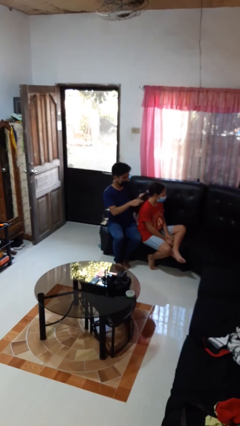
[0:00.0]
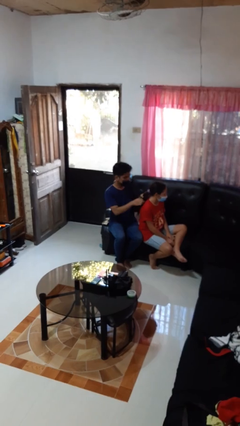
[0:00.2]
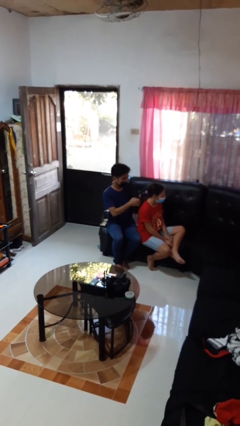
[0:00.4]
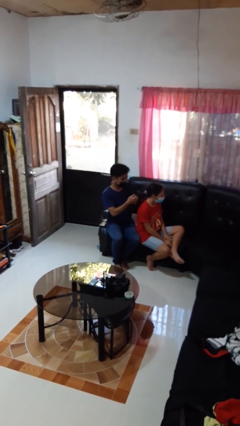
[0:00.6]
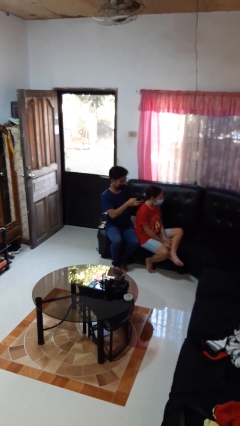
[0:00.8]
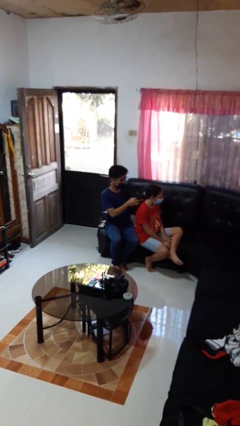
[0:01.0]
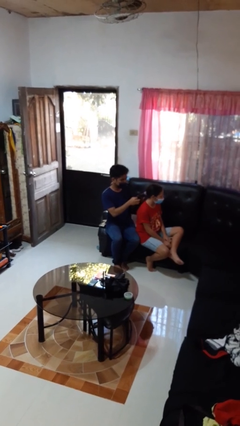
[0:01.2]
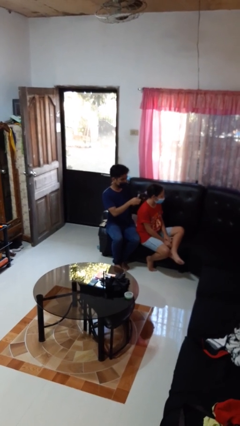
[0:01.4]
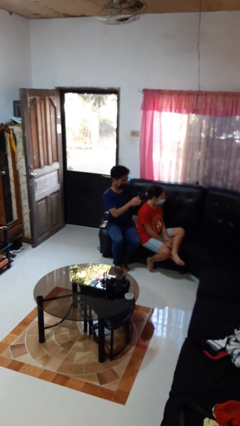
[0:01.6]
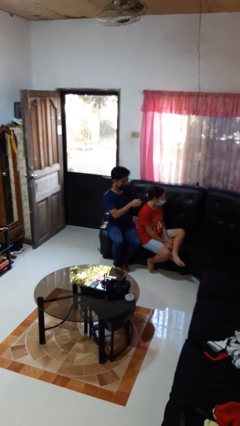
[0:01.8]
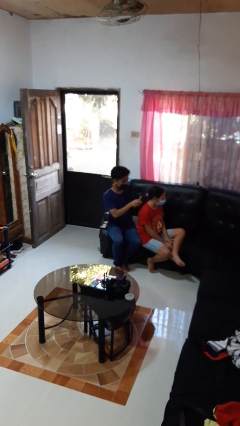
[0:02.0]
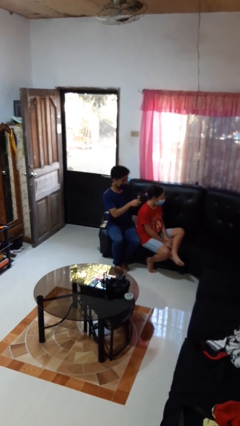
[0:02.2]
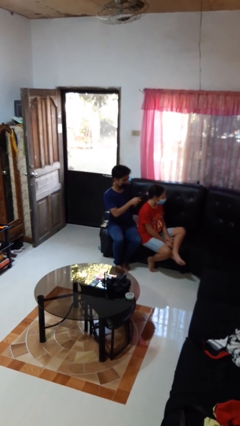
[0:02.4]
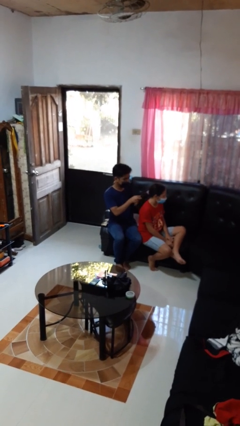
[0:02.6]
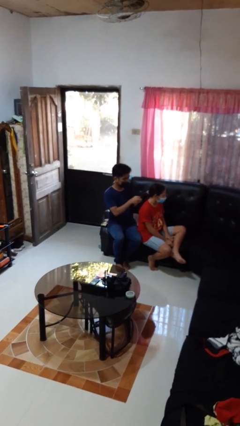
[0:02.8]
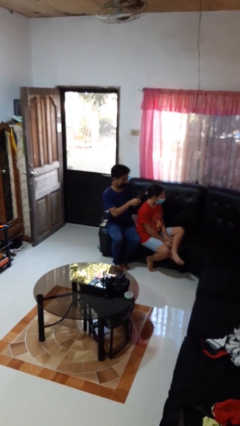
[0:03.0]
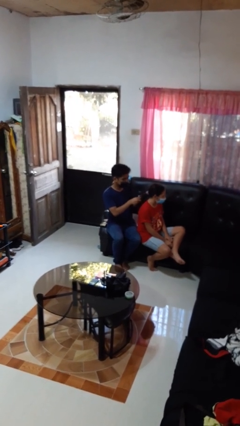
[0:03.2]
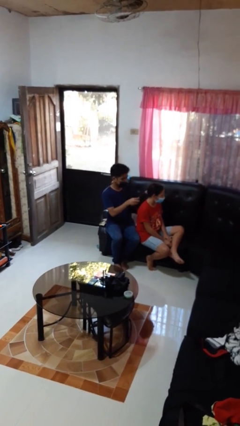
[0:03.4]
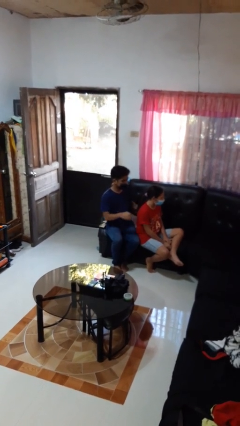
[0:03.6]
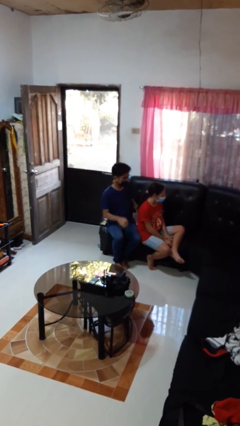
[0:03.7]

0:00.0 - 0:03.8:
person braids hair of person

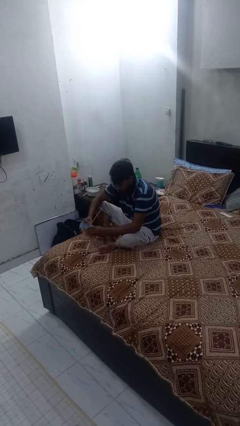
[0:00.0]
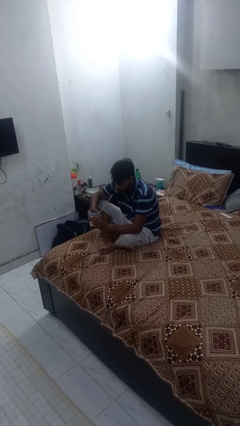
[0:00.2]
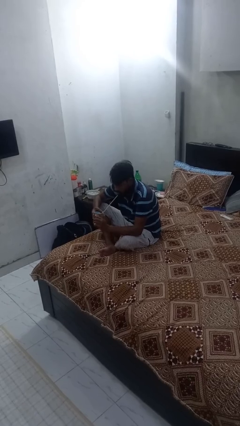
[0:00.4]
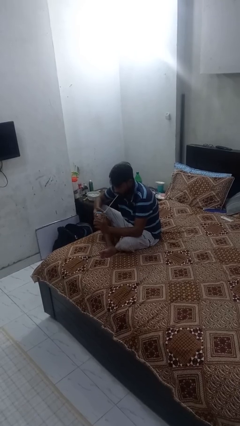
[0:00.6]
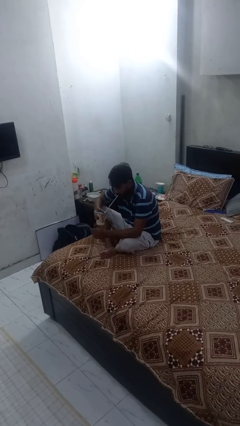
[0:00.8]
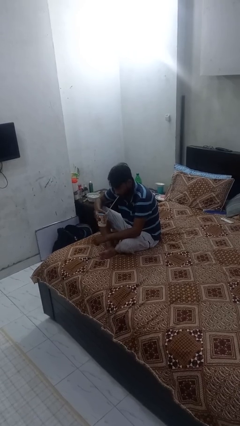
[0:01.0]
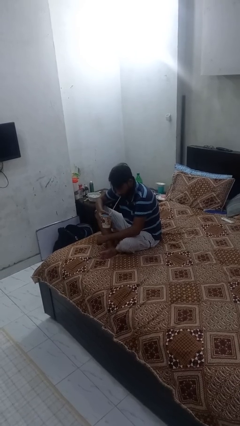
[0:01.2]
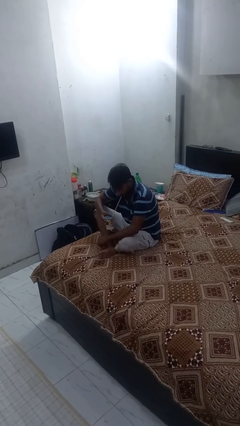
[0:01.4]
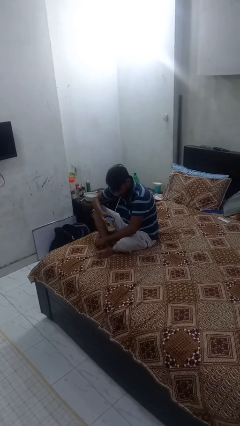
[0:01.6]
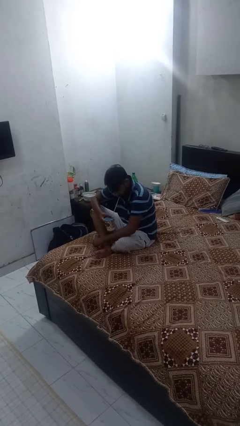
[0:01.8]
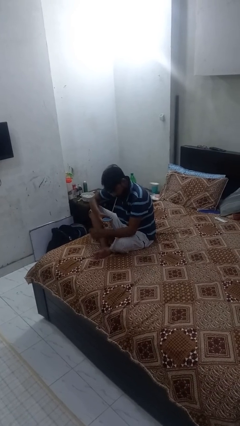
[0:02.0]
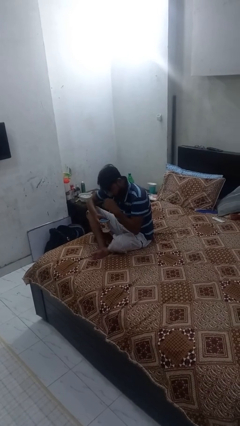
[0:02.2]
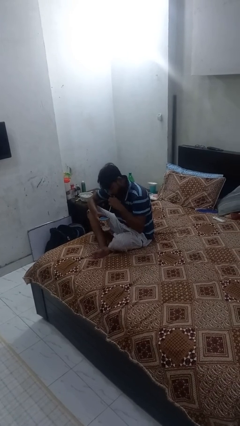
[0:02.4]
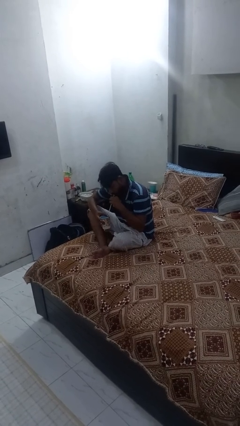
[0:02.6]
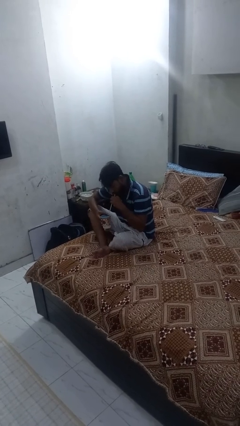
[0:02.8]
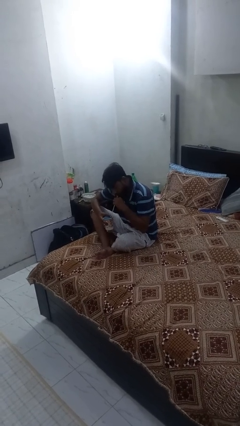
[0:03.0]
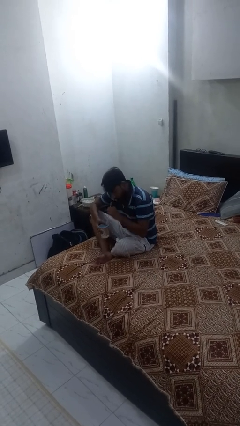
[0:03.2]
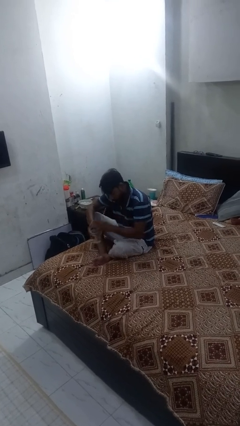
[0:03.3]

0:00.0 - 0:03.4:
person drinks from straw

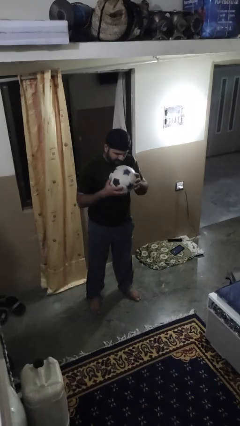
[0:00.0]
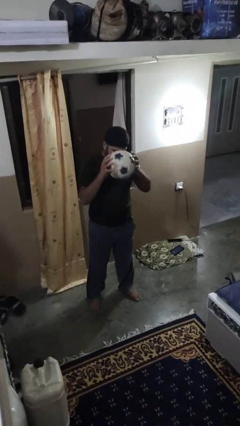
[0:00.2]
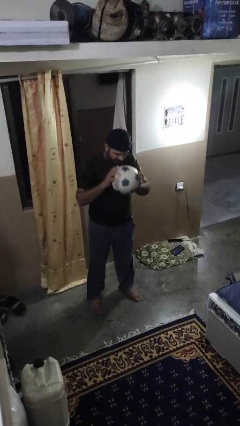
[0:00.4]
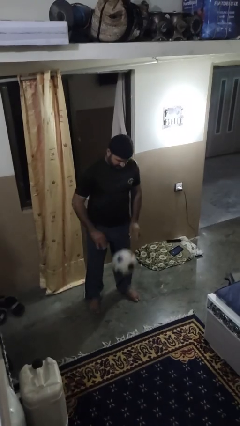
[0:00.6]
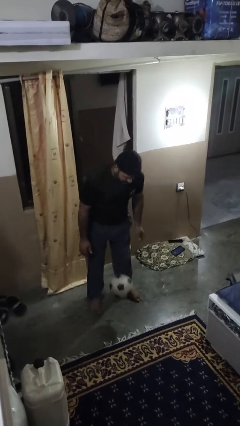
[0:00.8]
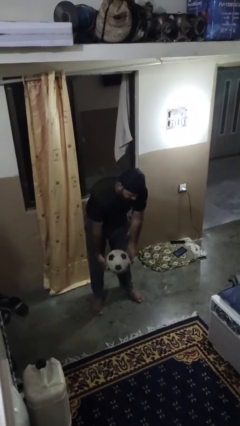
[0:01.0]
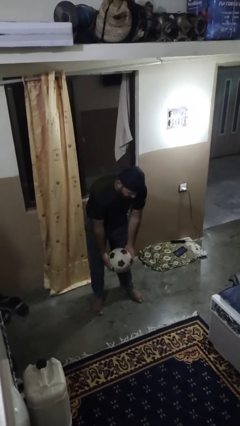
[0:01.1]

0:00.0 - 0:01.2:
person bounces ball on floor

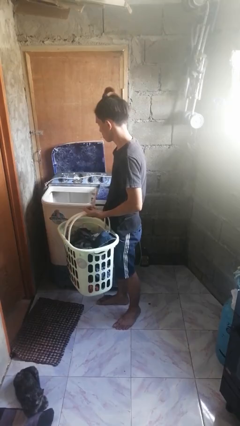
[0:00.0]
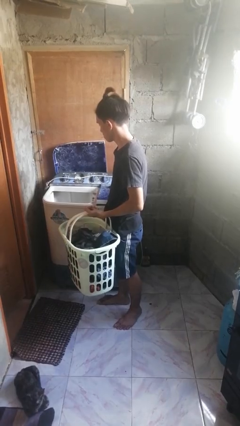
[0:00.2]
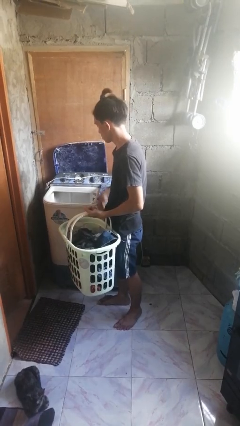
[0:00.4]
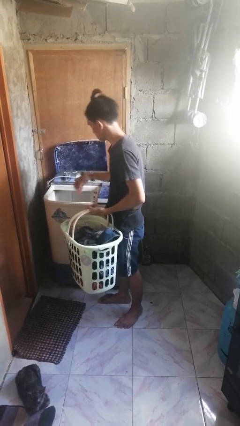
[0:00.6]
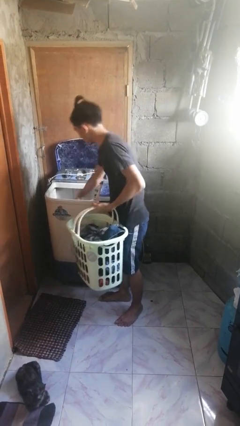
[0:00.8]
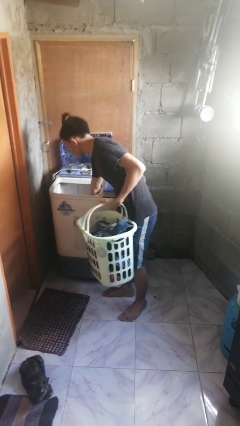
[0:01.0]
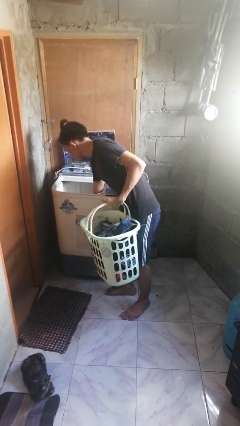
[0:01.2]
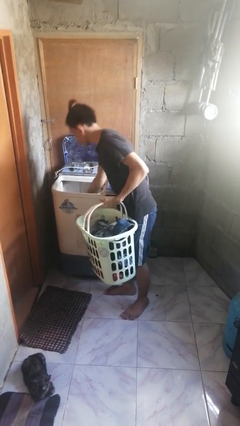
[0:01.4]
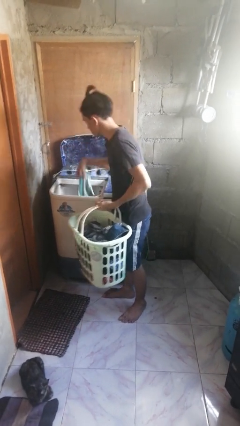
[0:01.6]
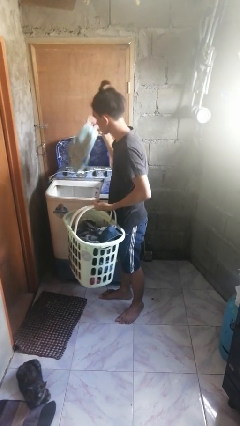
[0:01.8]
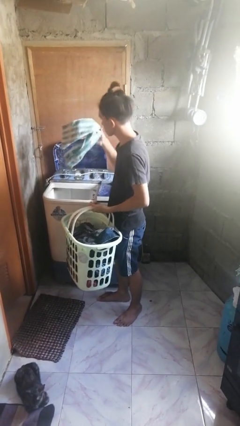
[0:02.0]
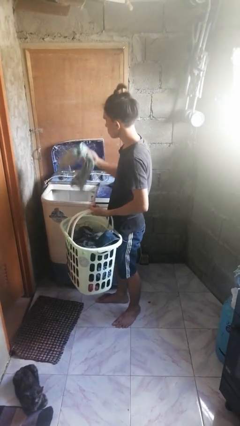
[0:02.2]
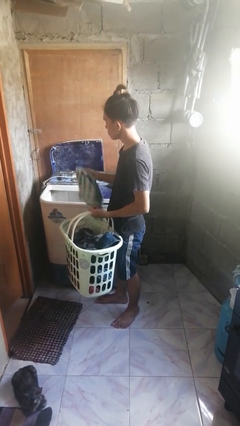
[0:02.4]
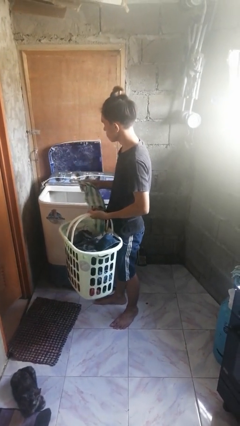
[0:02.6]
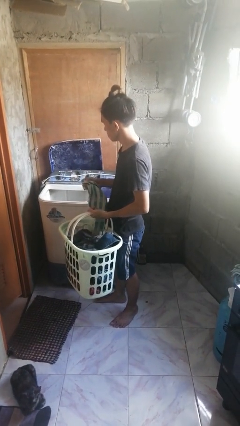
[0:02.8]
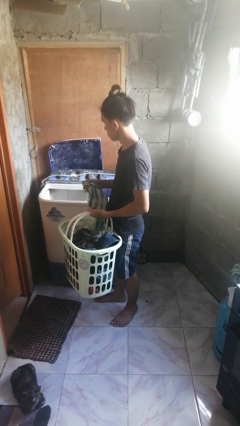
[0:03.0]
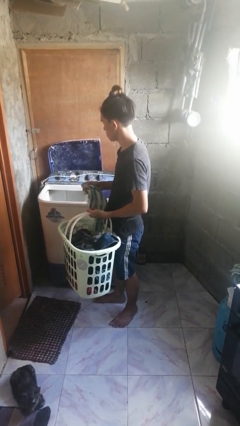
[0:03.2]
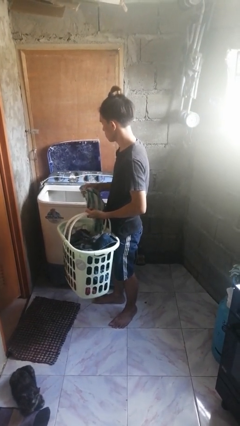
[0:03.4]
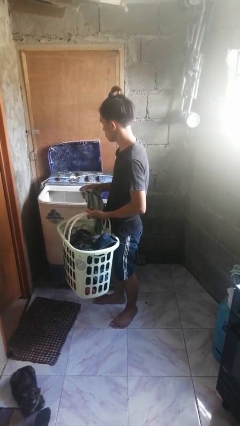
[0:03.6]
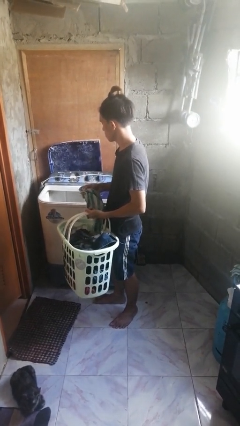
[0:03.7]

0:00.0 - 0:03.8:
person unloads clotheswasher

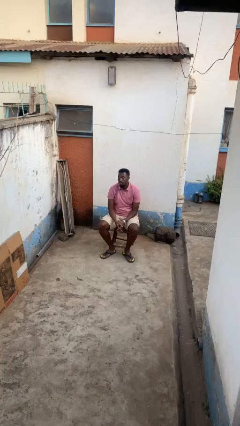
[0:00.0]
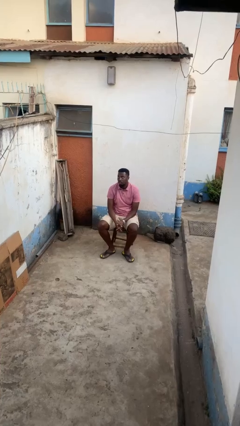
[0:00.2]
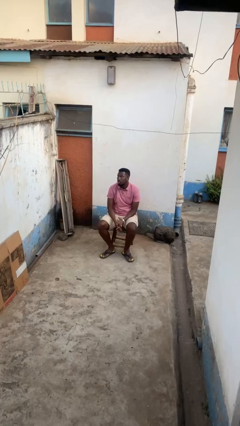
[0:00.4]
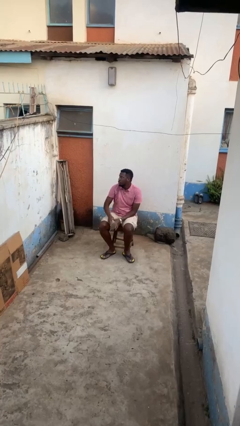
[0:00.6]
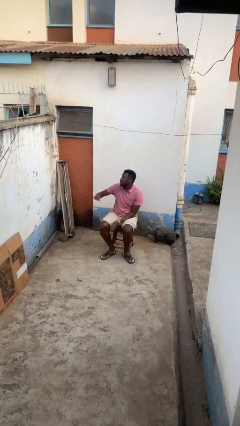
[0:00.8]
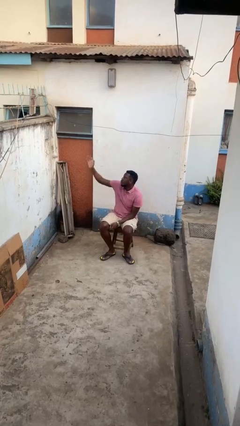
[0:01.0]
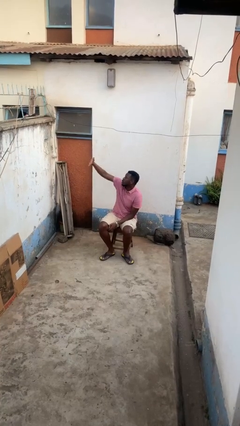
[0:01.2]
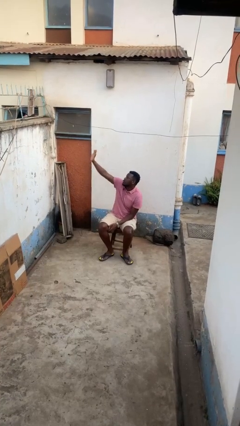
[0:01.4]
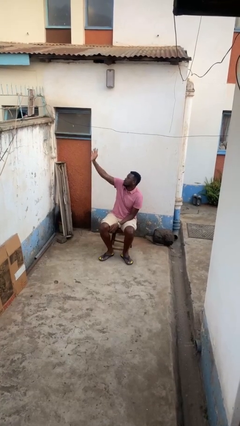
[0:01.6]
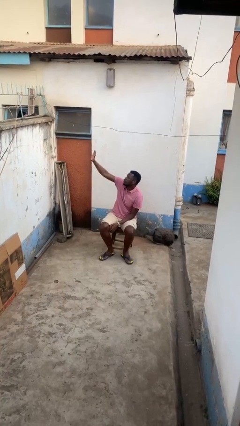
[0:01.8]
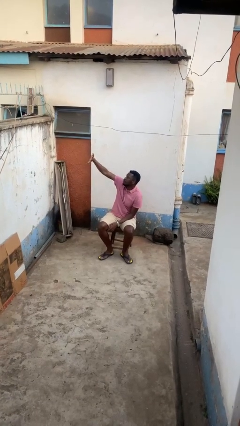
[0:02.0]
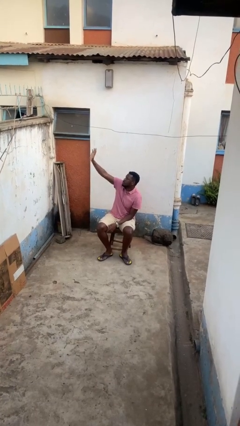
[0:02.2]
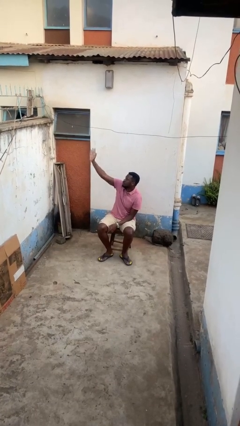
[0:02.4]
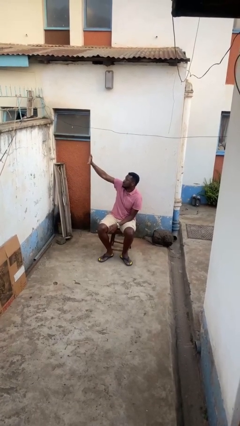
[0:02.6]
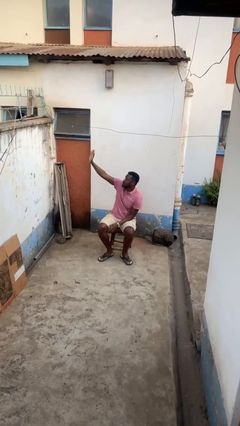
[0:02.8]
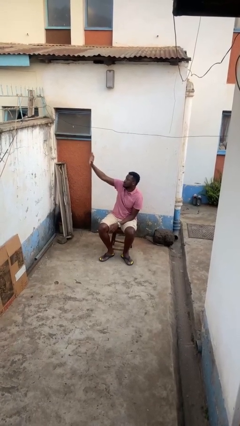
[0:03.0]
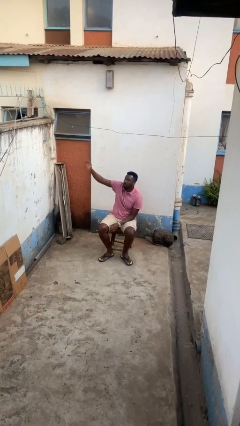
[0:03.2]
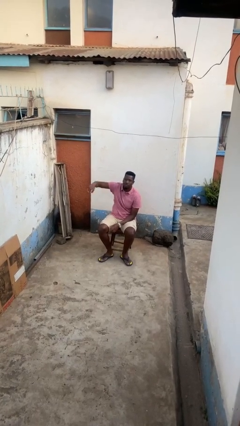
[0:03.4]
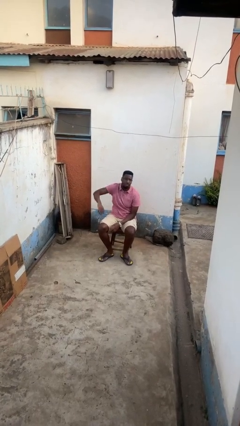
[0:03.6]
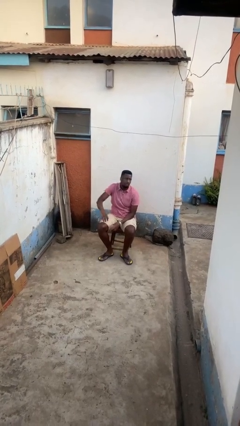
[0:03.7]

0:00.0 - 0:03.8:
person waves at person

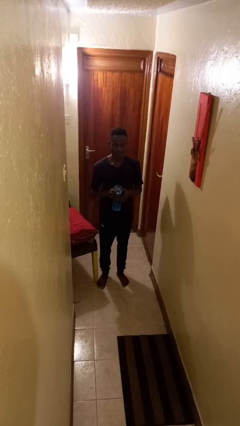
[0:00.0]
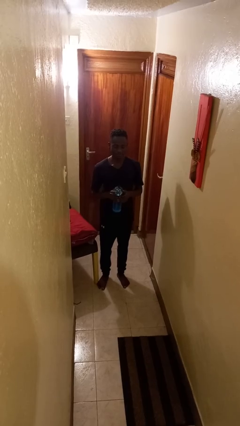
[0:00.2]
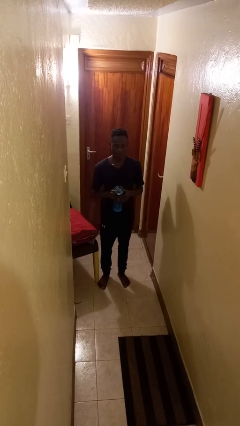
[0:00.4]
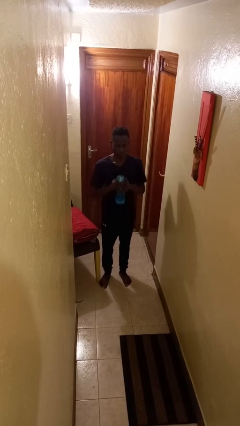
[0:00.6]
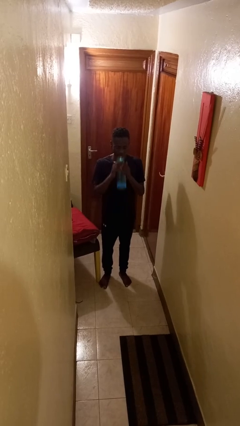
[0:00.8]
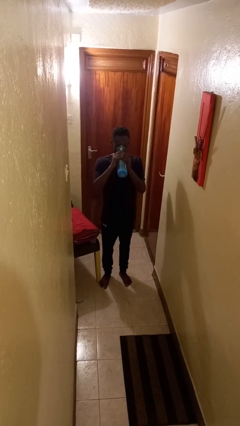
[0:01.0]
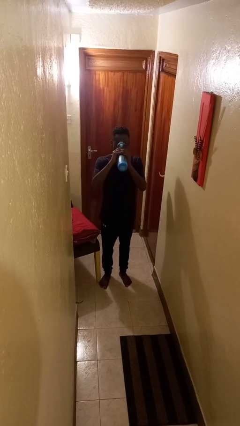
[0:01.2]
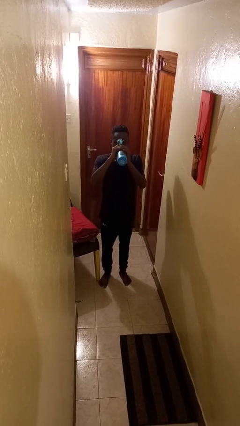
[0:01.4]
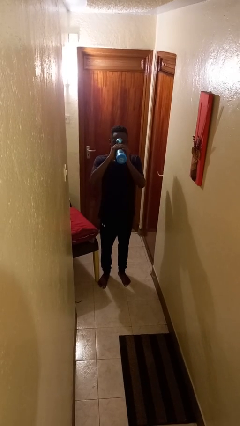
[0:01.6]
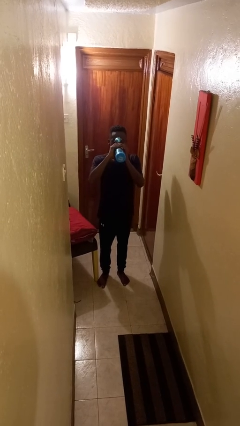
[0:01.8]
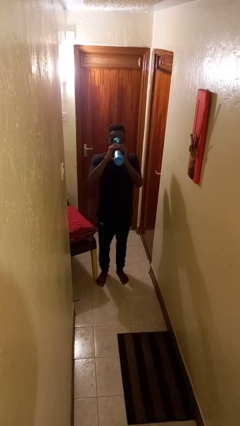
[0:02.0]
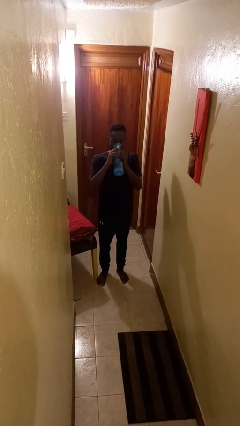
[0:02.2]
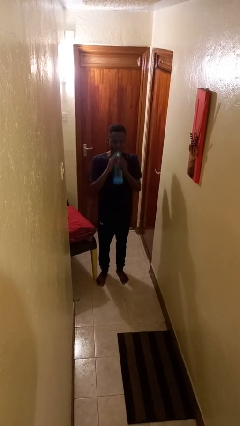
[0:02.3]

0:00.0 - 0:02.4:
person drinks from bottle
